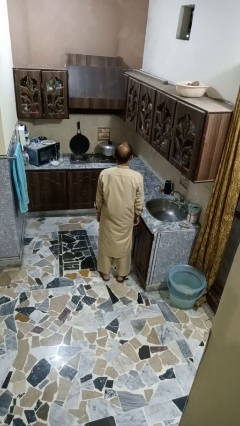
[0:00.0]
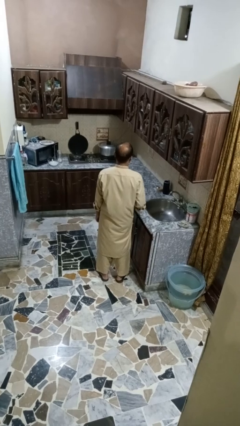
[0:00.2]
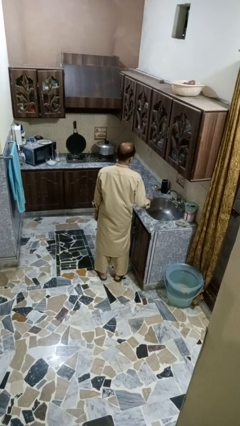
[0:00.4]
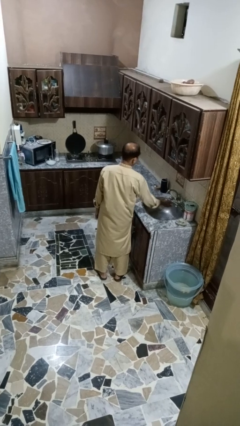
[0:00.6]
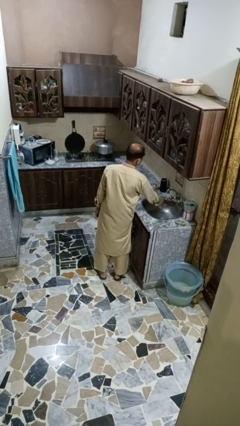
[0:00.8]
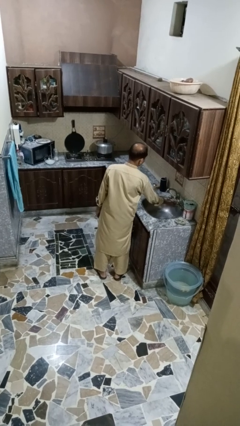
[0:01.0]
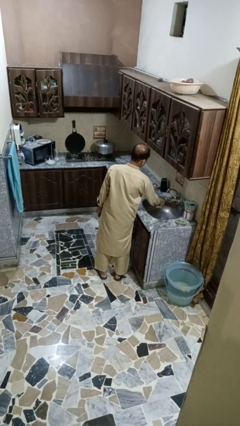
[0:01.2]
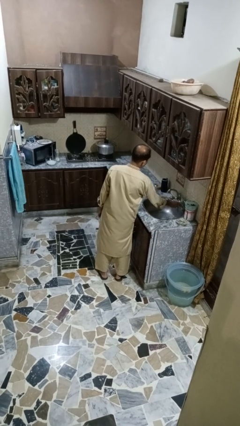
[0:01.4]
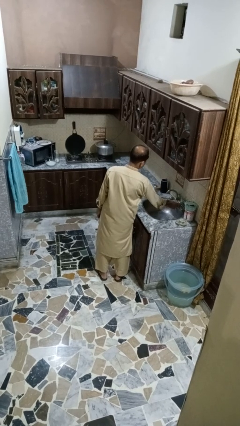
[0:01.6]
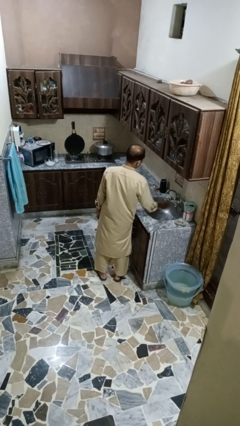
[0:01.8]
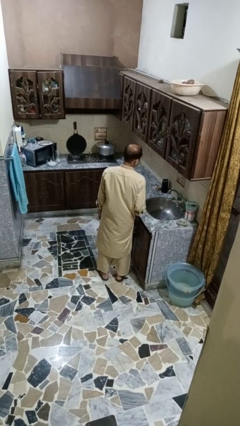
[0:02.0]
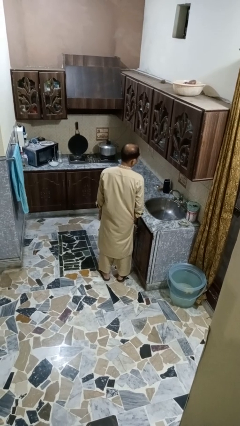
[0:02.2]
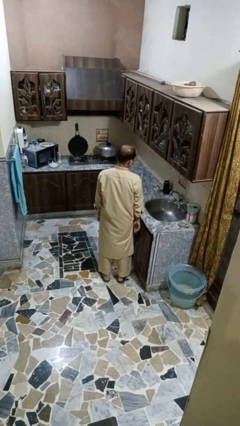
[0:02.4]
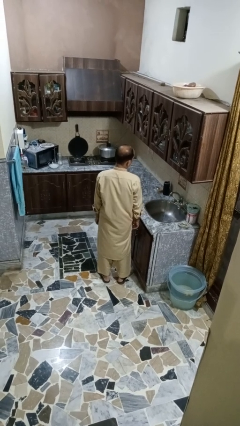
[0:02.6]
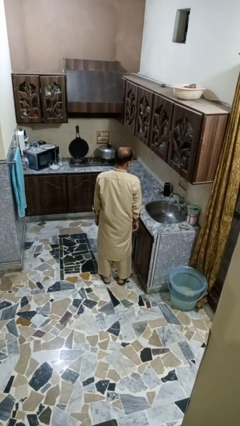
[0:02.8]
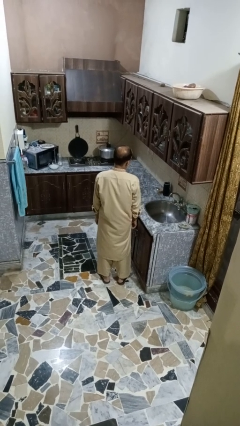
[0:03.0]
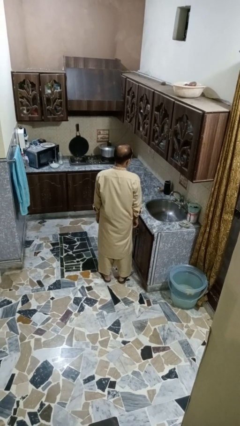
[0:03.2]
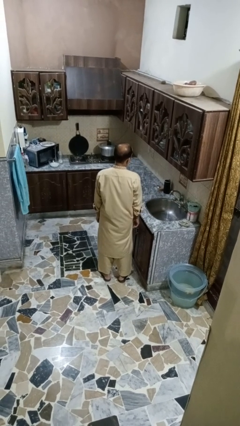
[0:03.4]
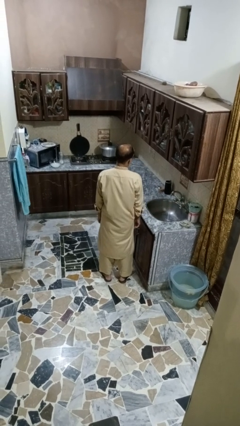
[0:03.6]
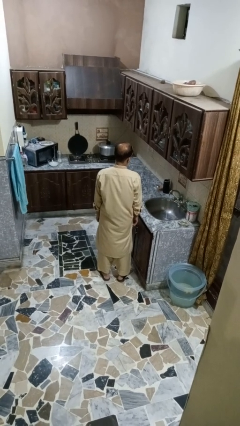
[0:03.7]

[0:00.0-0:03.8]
person turns on faucet

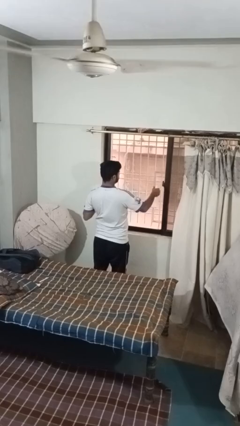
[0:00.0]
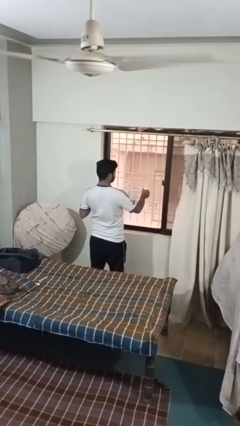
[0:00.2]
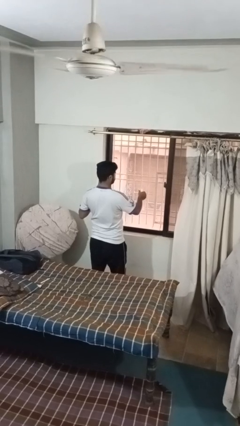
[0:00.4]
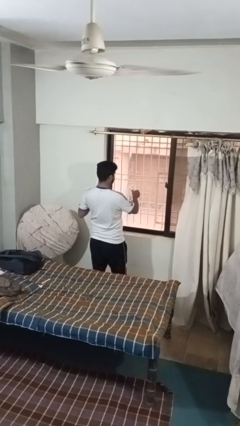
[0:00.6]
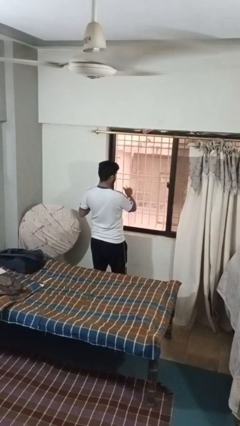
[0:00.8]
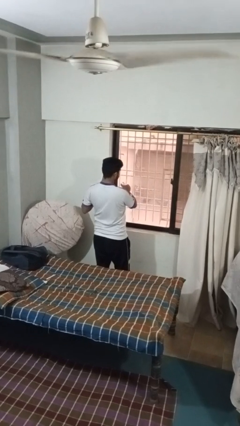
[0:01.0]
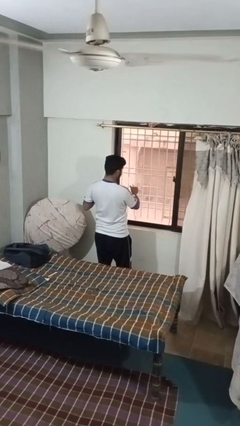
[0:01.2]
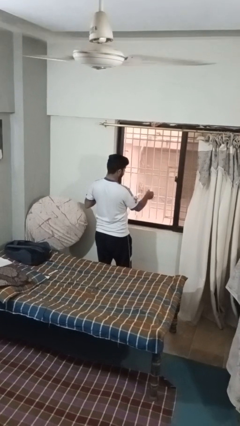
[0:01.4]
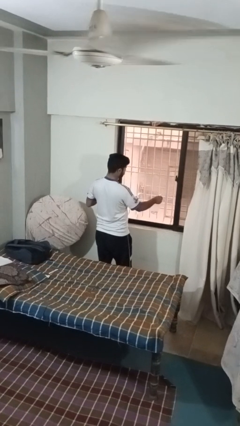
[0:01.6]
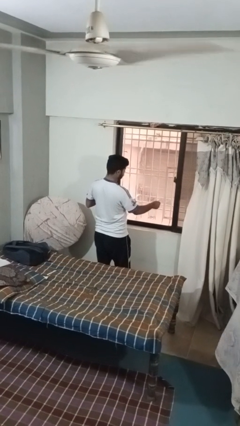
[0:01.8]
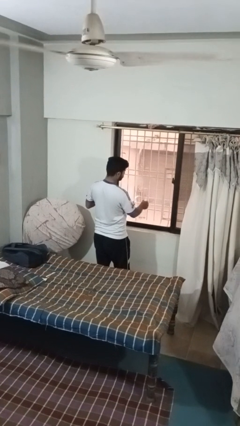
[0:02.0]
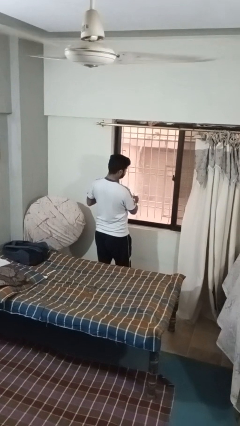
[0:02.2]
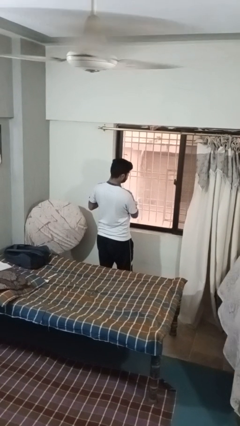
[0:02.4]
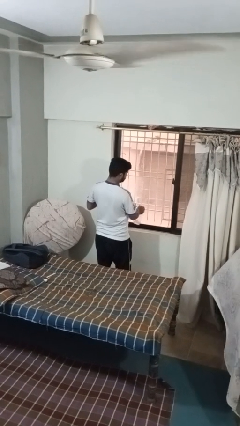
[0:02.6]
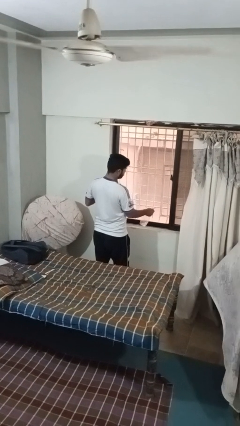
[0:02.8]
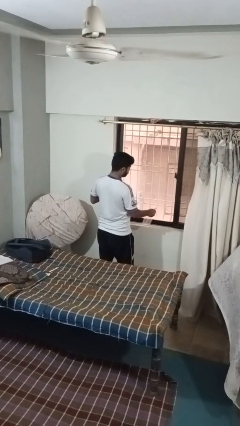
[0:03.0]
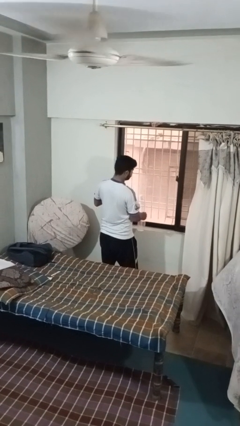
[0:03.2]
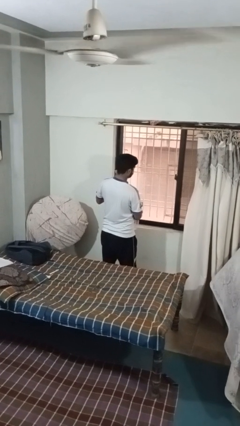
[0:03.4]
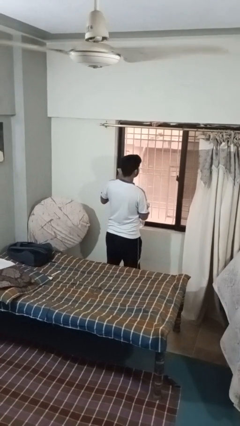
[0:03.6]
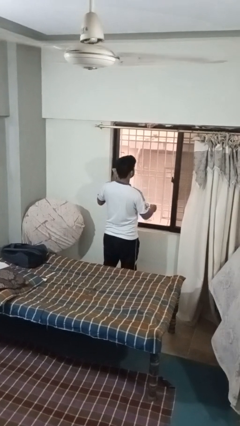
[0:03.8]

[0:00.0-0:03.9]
person sprays from bottle

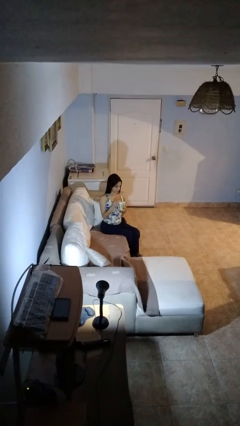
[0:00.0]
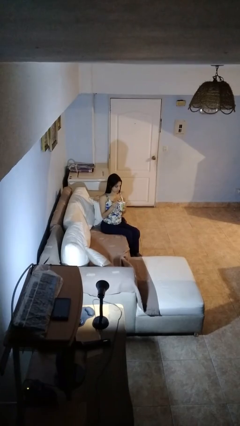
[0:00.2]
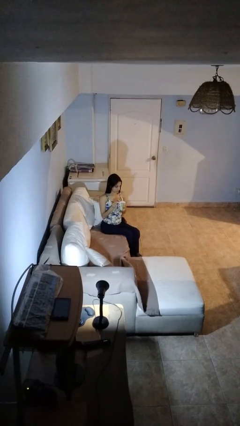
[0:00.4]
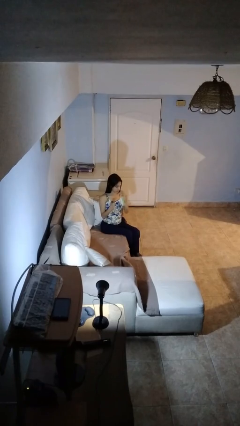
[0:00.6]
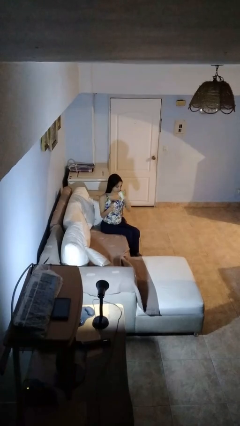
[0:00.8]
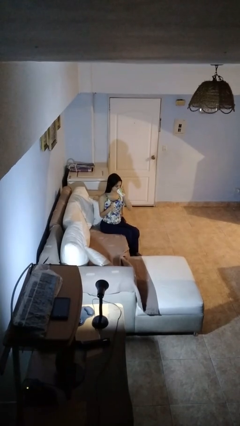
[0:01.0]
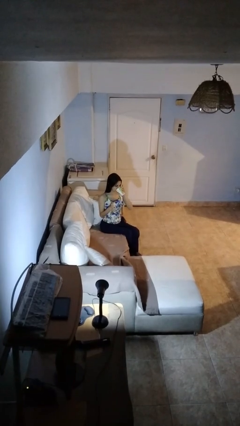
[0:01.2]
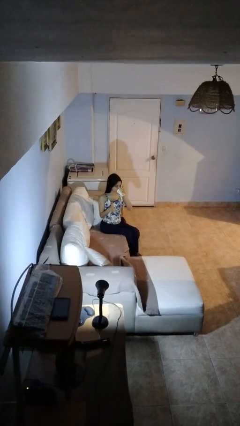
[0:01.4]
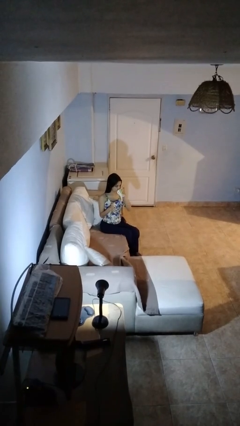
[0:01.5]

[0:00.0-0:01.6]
person drinks from mug

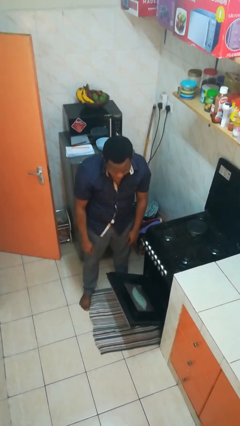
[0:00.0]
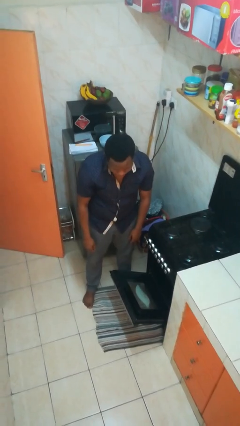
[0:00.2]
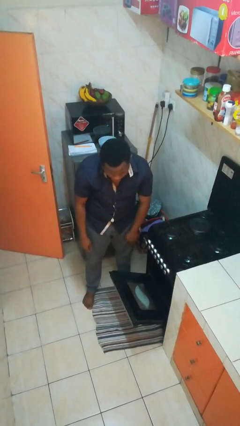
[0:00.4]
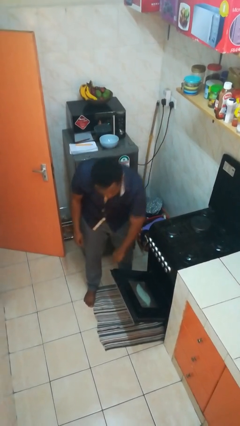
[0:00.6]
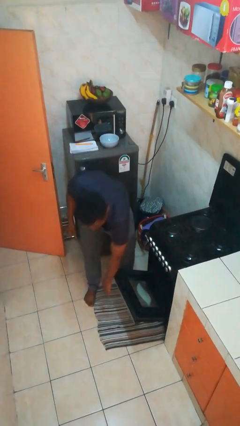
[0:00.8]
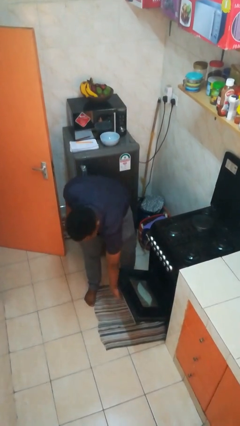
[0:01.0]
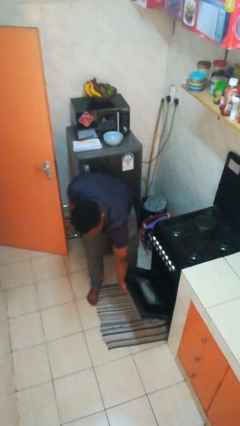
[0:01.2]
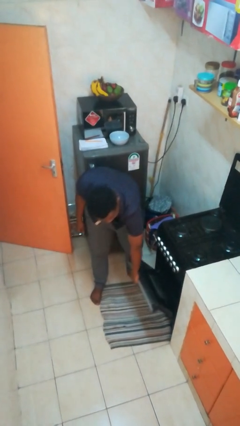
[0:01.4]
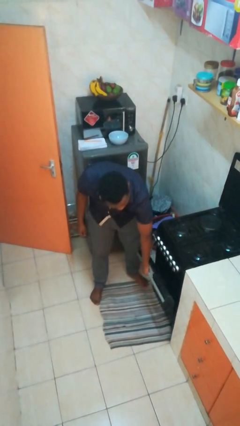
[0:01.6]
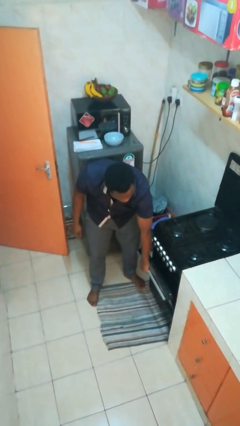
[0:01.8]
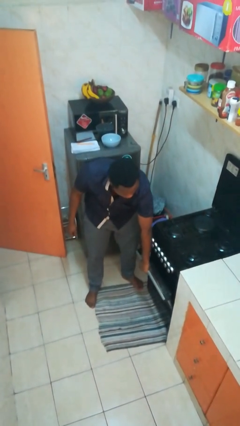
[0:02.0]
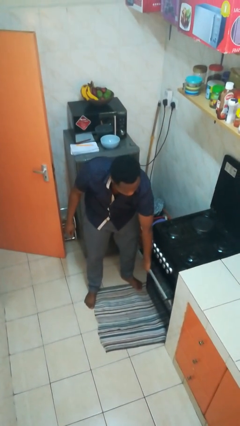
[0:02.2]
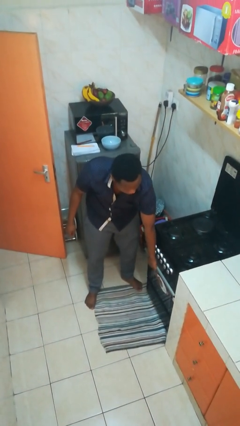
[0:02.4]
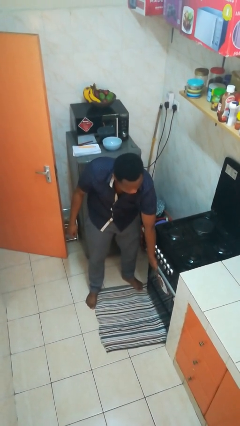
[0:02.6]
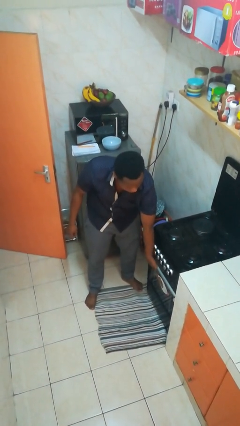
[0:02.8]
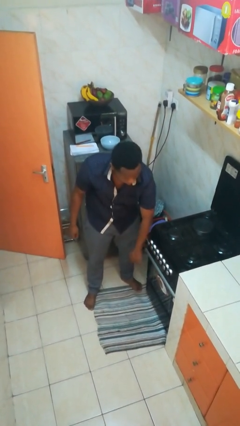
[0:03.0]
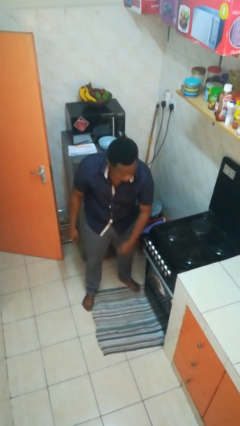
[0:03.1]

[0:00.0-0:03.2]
person closes oven door

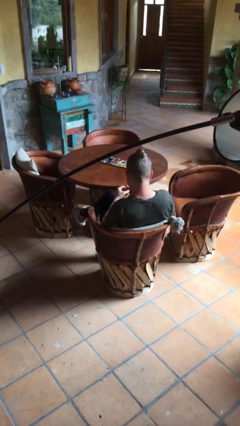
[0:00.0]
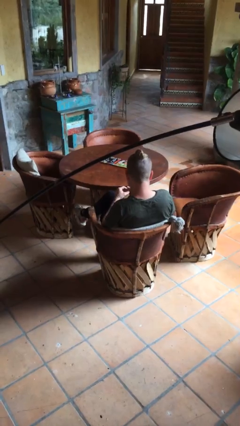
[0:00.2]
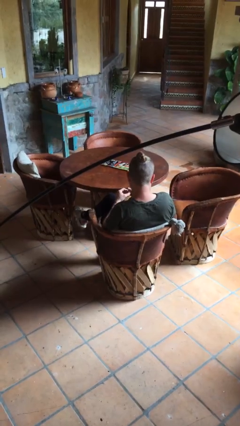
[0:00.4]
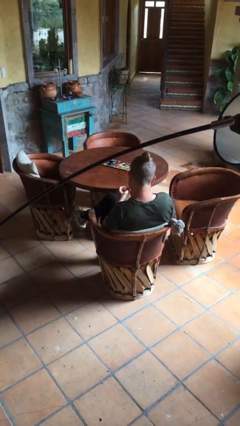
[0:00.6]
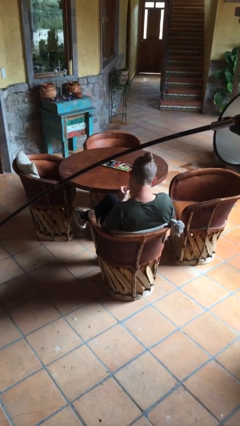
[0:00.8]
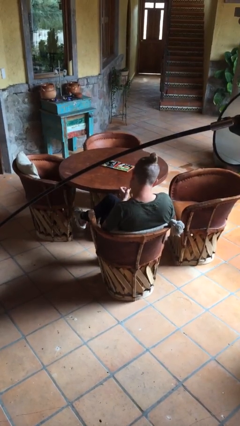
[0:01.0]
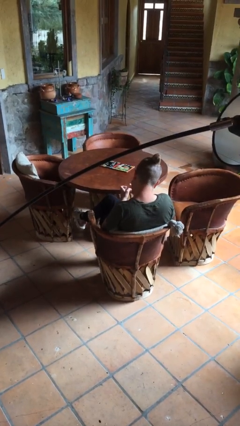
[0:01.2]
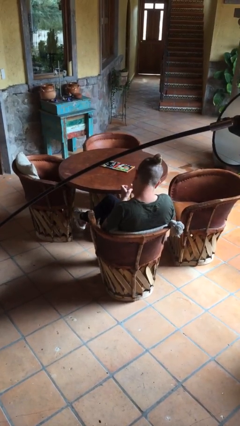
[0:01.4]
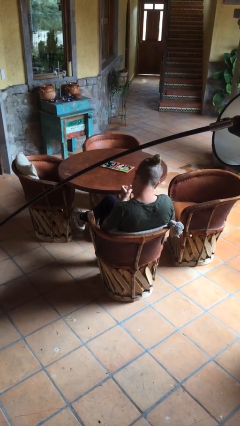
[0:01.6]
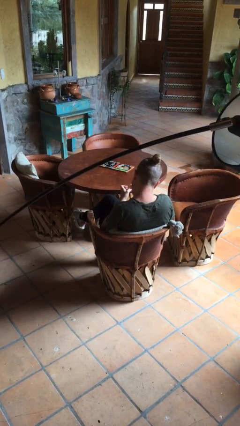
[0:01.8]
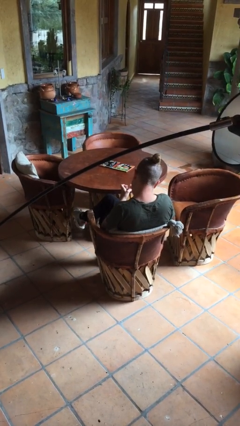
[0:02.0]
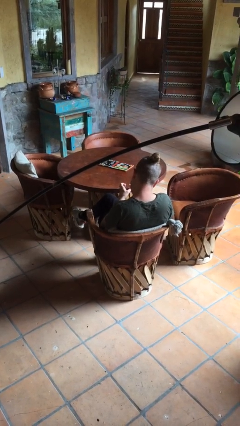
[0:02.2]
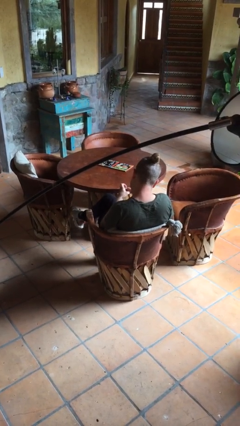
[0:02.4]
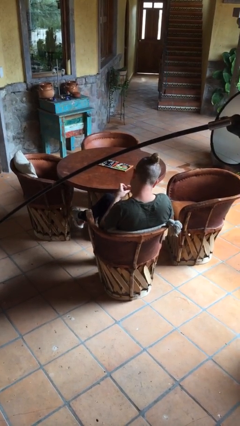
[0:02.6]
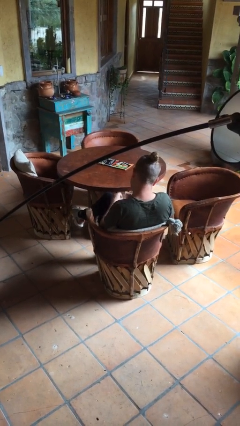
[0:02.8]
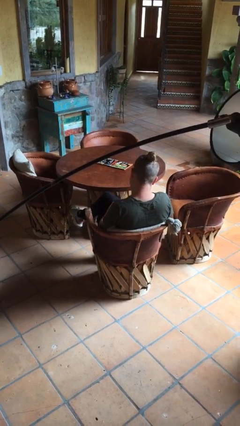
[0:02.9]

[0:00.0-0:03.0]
person clips fingernails

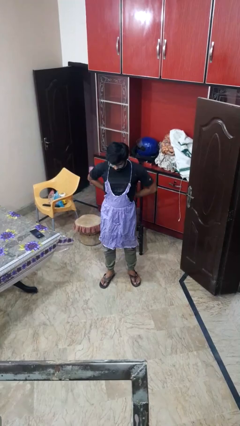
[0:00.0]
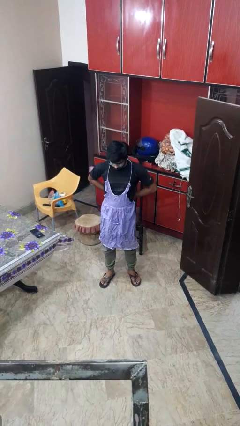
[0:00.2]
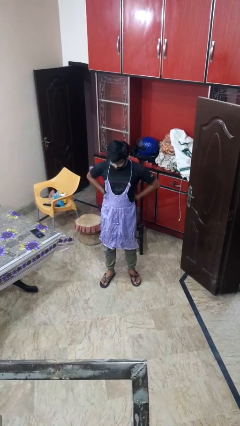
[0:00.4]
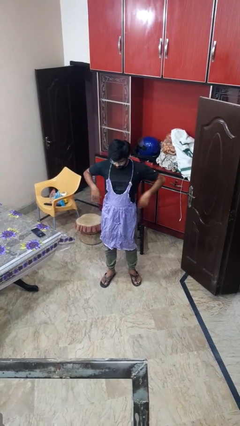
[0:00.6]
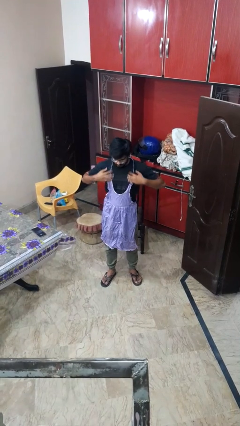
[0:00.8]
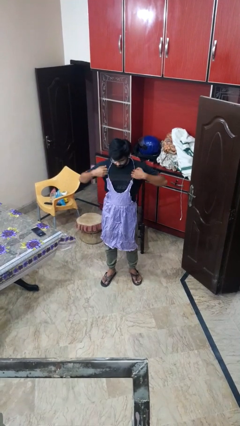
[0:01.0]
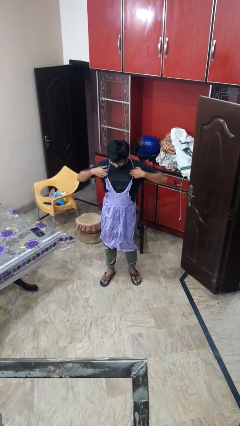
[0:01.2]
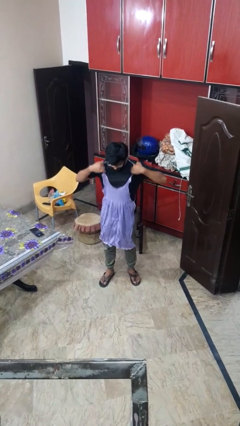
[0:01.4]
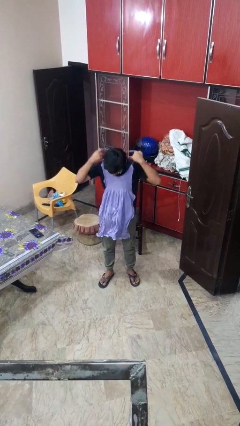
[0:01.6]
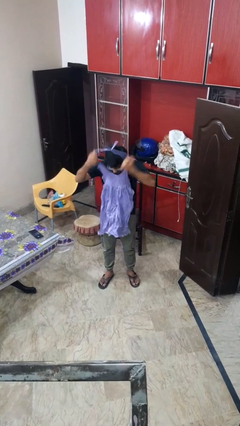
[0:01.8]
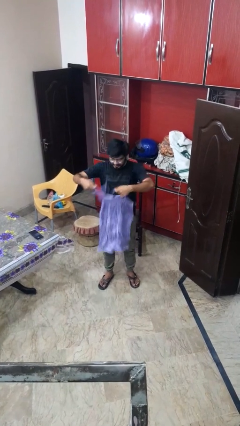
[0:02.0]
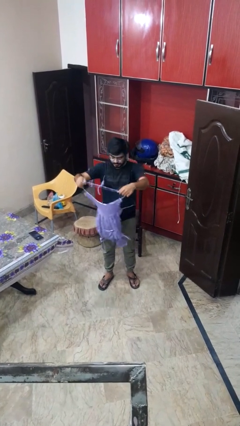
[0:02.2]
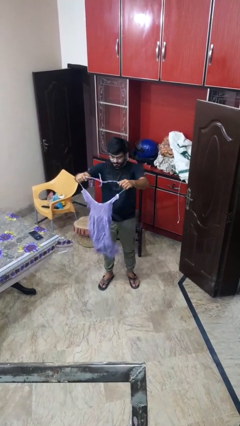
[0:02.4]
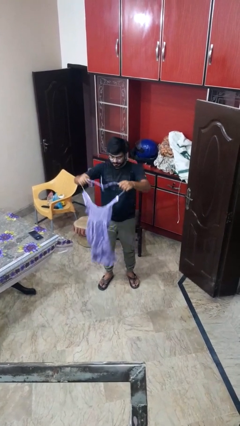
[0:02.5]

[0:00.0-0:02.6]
person takes off apron
